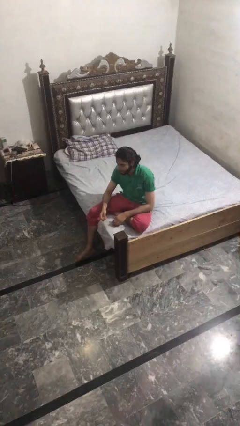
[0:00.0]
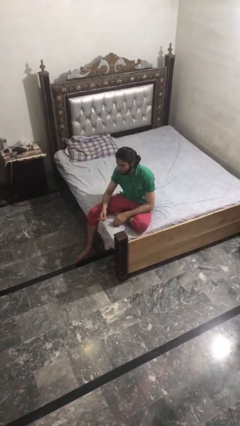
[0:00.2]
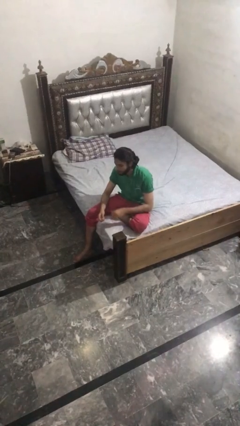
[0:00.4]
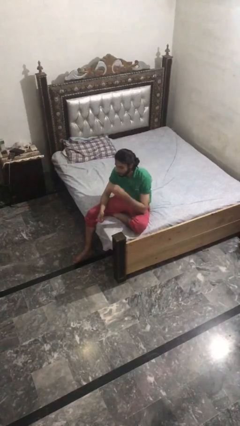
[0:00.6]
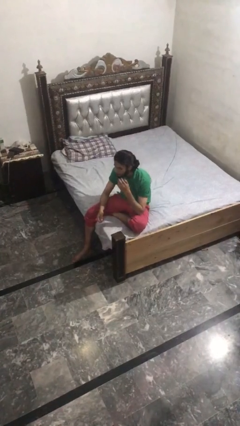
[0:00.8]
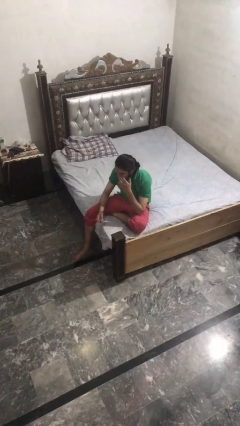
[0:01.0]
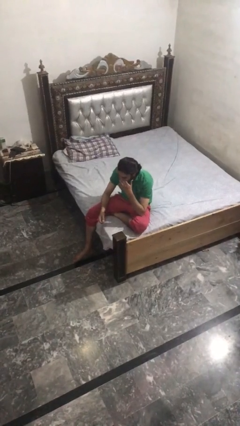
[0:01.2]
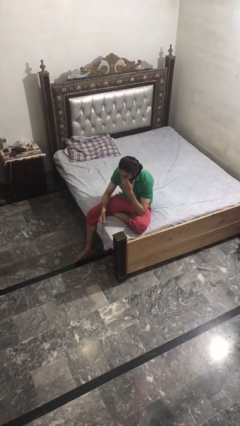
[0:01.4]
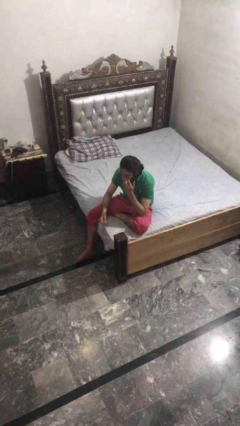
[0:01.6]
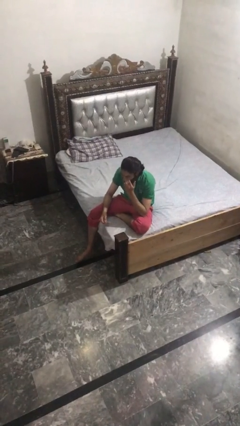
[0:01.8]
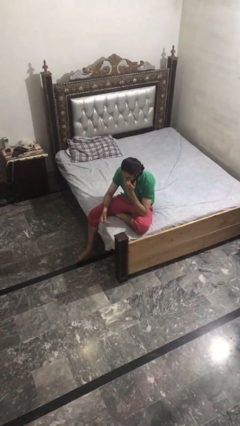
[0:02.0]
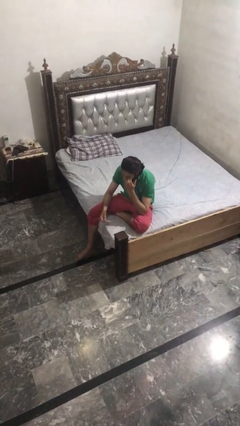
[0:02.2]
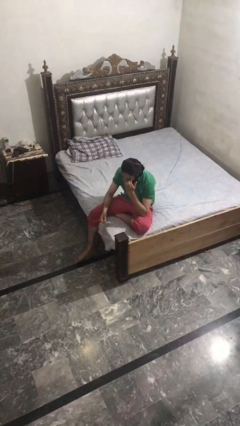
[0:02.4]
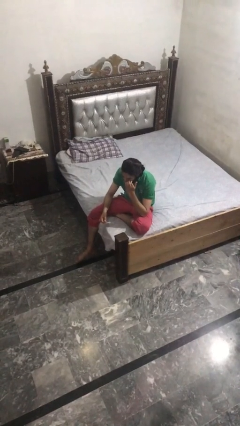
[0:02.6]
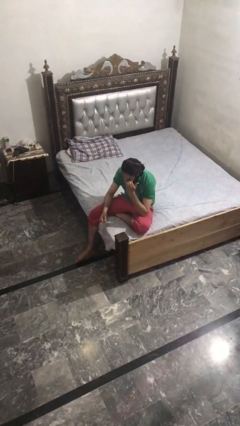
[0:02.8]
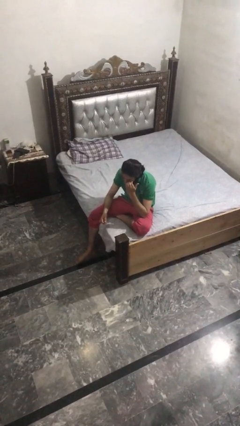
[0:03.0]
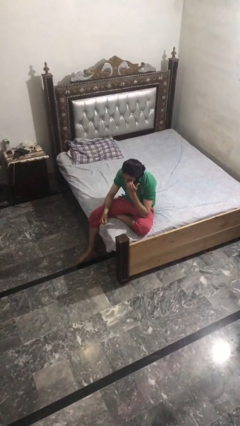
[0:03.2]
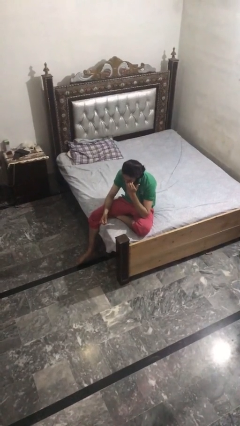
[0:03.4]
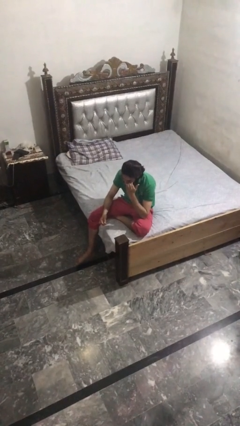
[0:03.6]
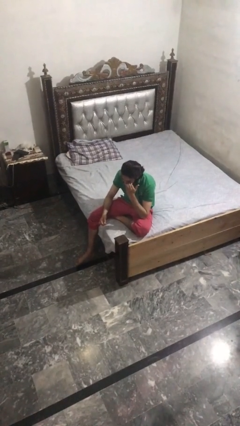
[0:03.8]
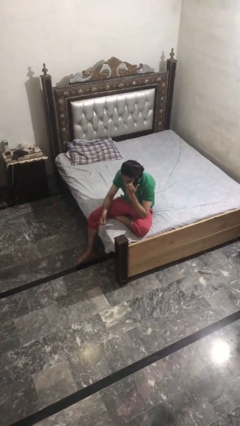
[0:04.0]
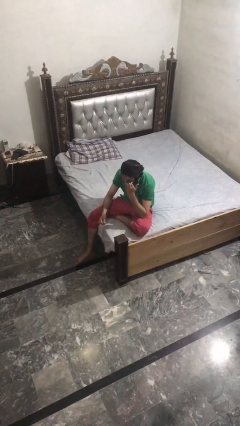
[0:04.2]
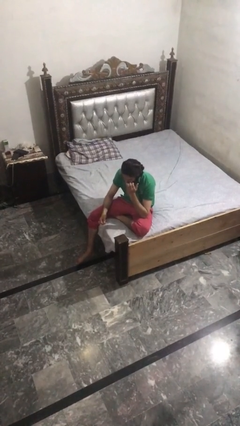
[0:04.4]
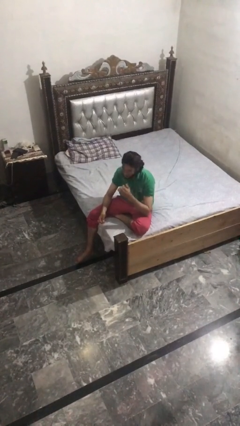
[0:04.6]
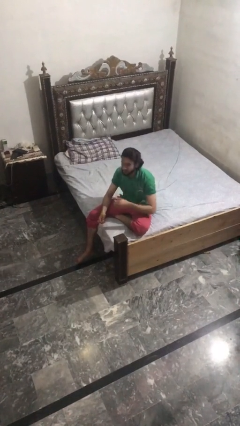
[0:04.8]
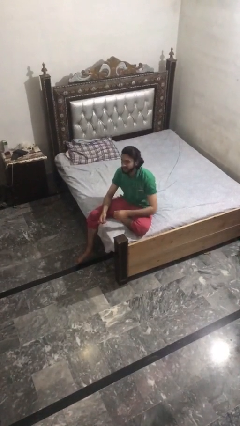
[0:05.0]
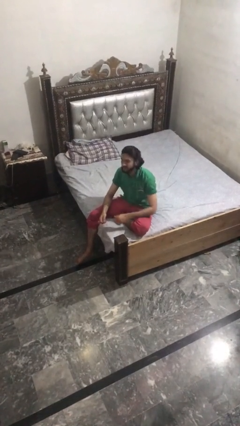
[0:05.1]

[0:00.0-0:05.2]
person scratches face

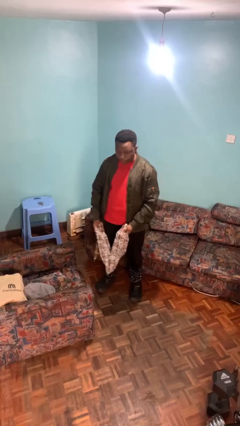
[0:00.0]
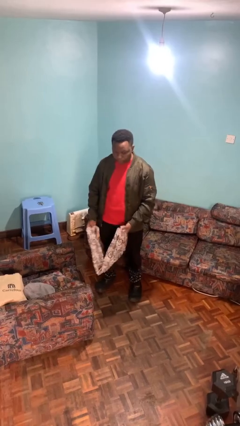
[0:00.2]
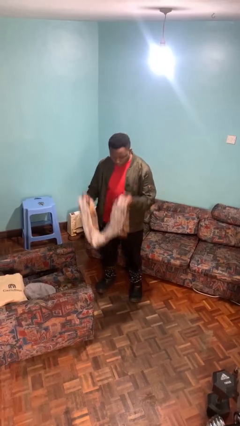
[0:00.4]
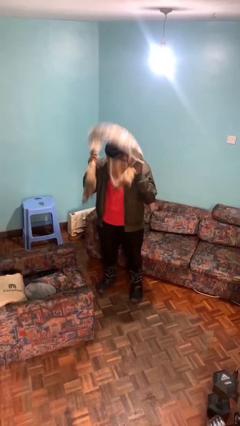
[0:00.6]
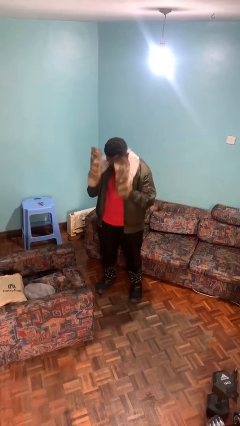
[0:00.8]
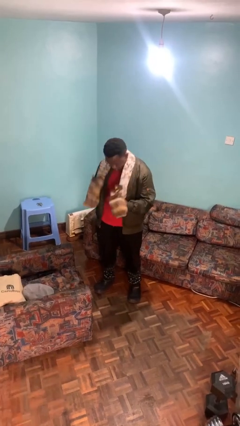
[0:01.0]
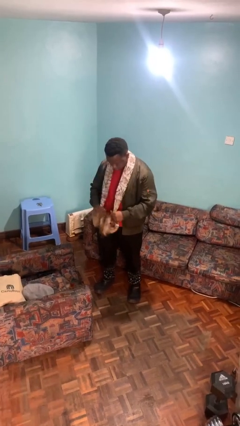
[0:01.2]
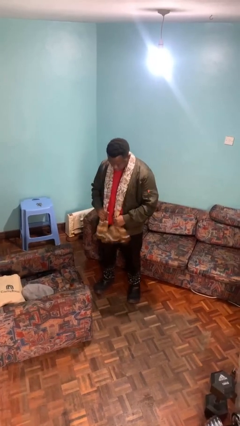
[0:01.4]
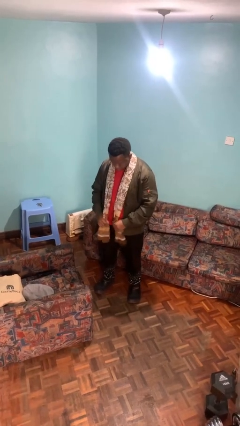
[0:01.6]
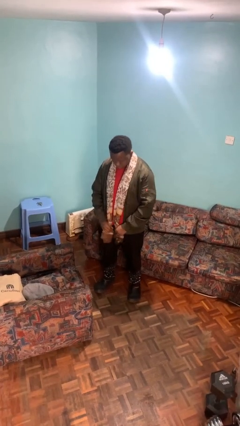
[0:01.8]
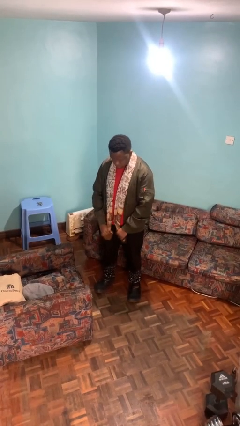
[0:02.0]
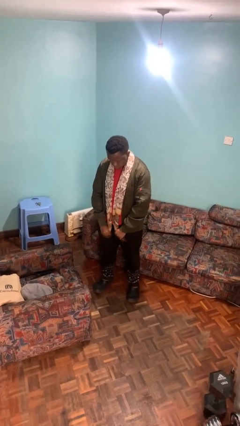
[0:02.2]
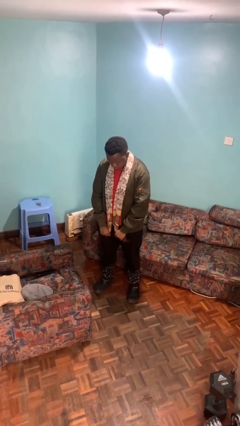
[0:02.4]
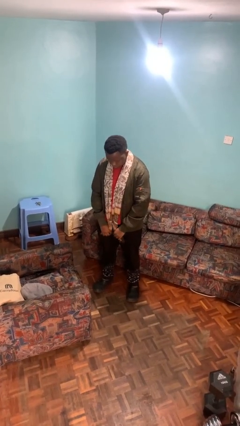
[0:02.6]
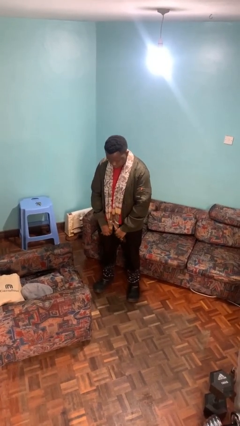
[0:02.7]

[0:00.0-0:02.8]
person puts on scarf

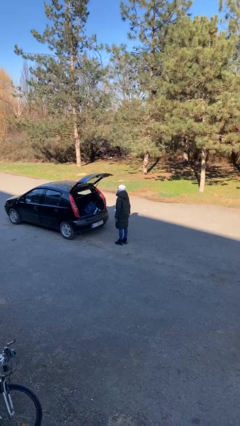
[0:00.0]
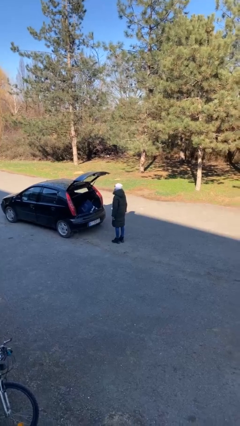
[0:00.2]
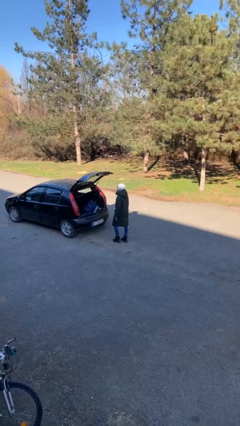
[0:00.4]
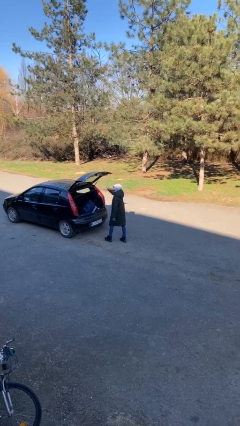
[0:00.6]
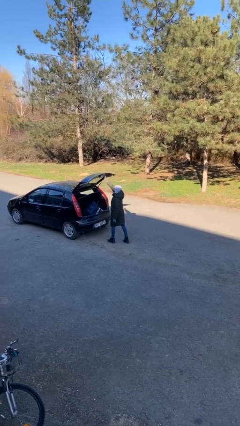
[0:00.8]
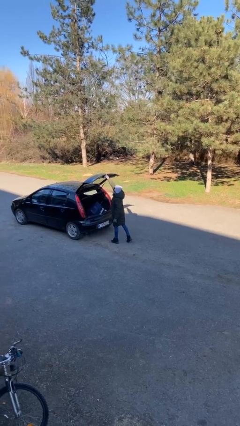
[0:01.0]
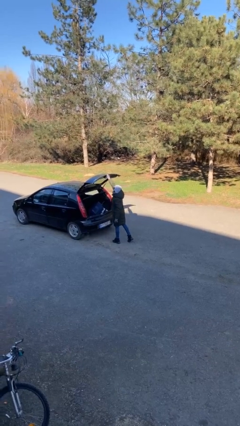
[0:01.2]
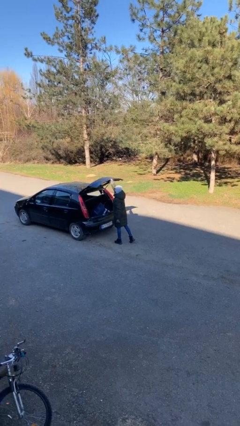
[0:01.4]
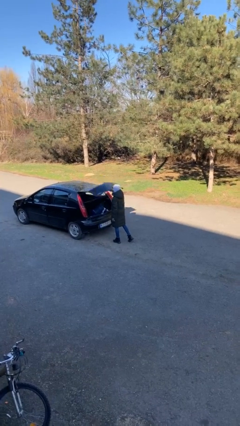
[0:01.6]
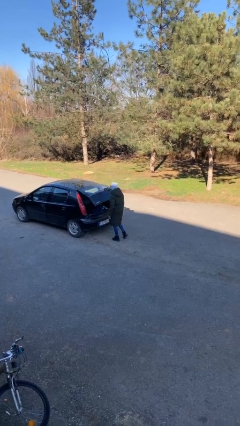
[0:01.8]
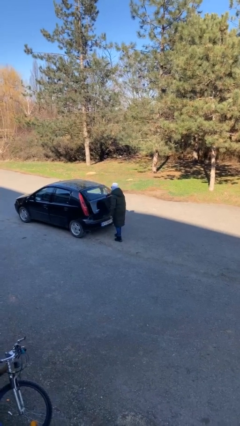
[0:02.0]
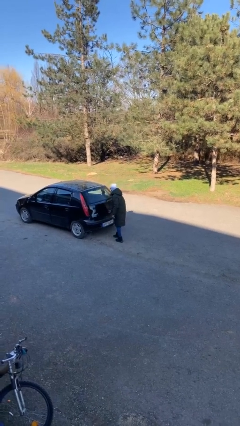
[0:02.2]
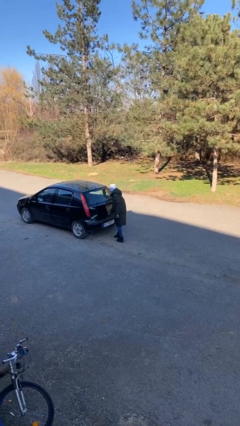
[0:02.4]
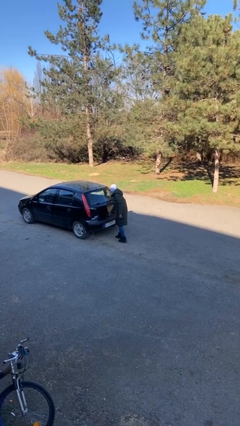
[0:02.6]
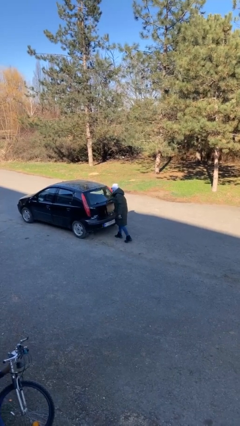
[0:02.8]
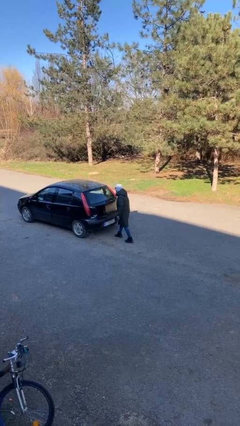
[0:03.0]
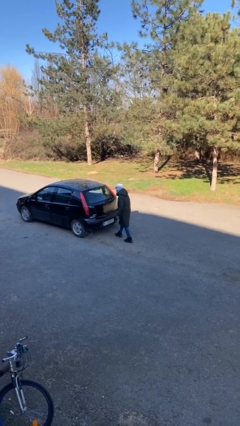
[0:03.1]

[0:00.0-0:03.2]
person closes car trunk

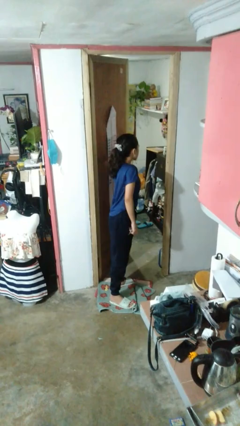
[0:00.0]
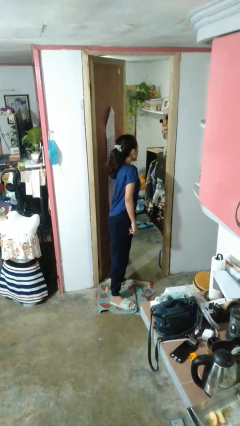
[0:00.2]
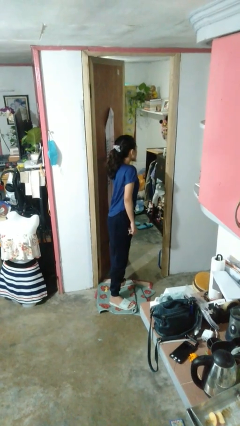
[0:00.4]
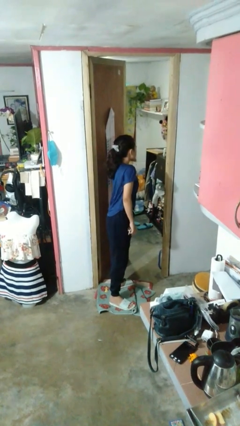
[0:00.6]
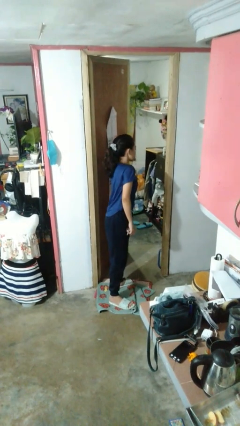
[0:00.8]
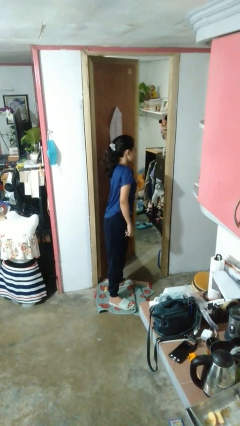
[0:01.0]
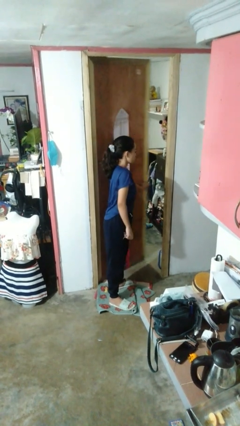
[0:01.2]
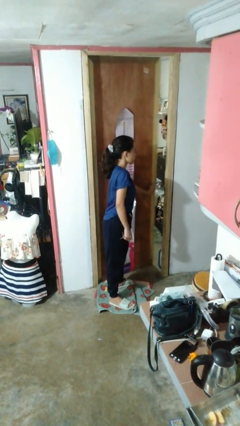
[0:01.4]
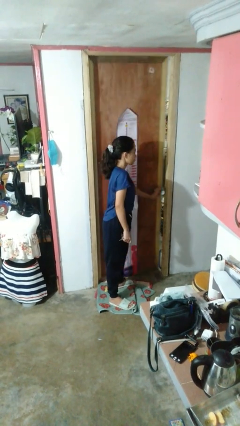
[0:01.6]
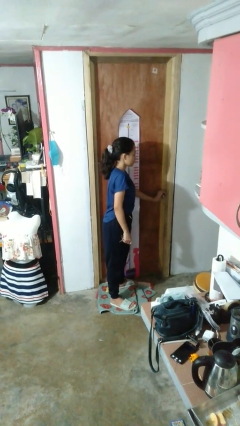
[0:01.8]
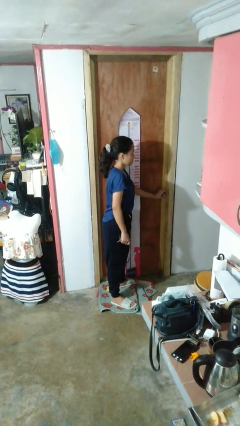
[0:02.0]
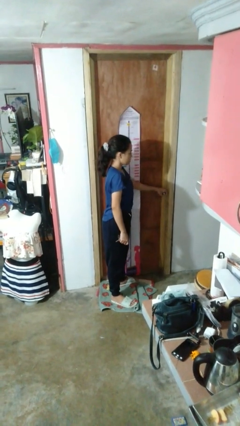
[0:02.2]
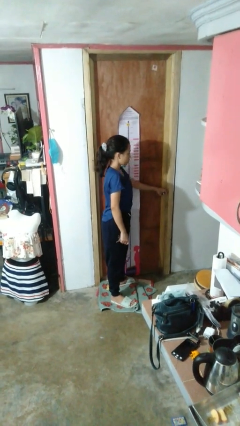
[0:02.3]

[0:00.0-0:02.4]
person closes facility door

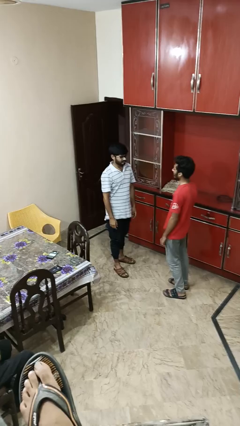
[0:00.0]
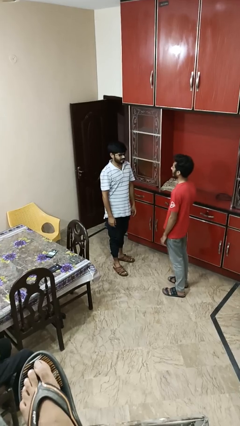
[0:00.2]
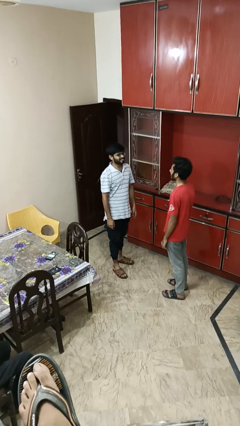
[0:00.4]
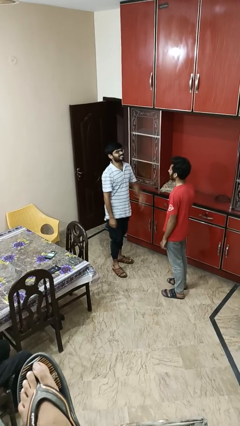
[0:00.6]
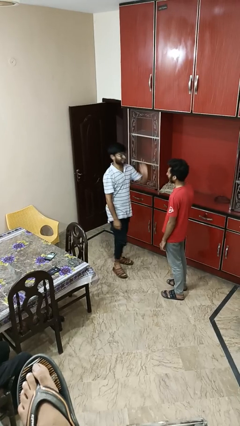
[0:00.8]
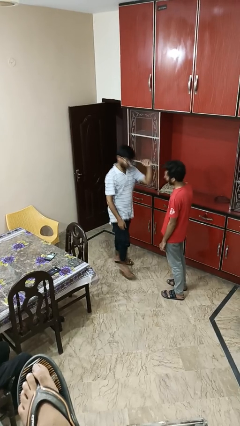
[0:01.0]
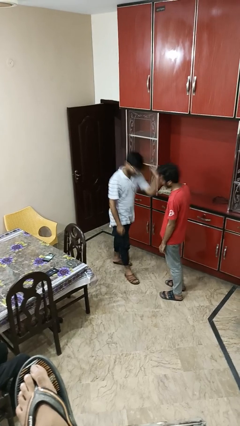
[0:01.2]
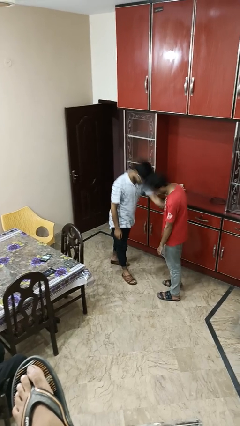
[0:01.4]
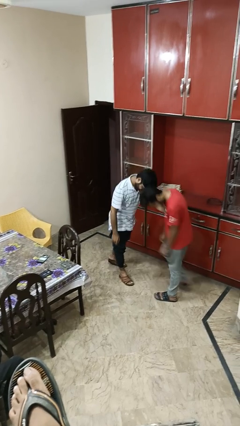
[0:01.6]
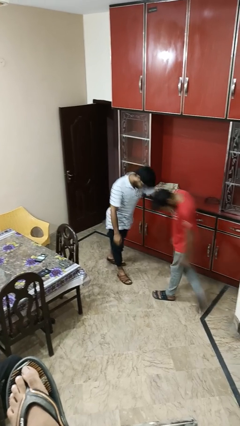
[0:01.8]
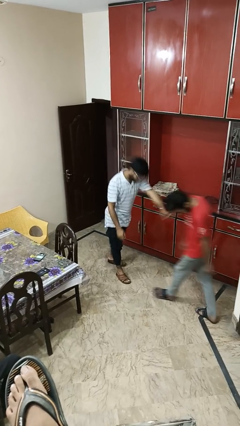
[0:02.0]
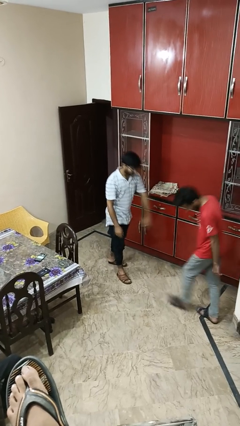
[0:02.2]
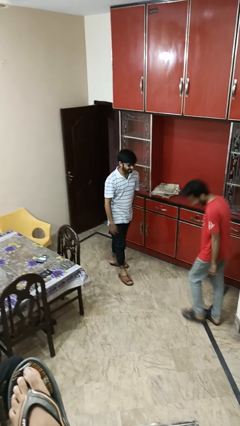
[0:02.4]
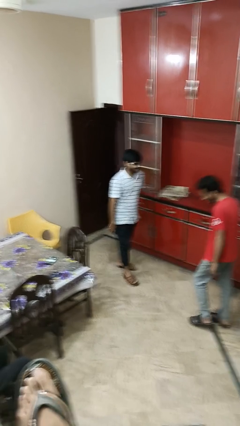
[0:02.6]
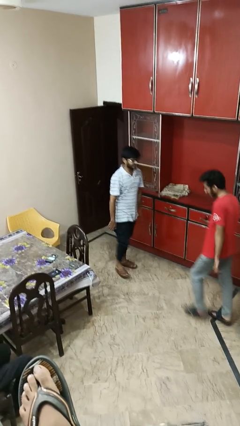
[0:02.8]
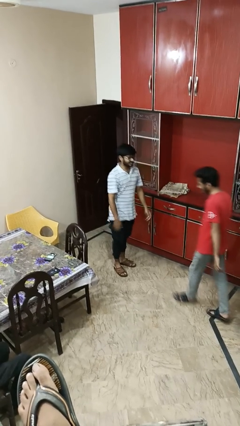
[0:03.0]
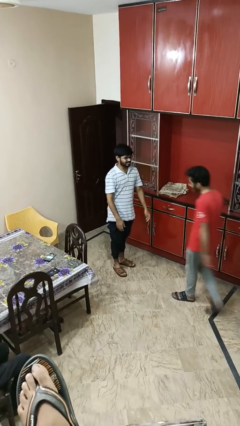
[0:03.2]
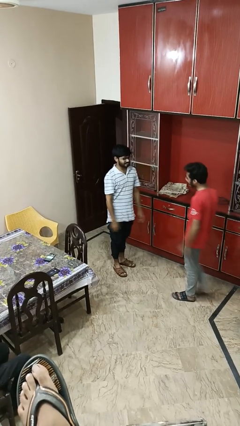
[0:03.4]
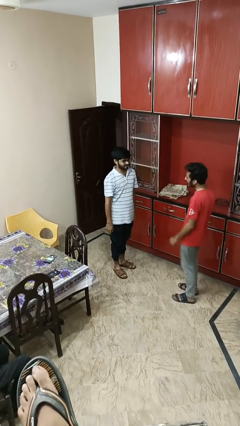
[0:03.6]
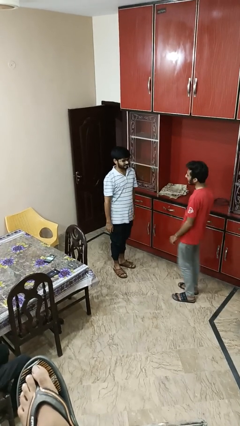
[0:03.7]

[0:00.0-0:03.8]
person shoves person
